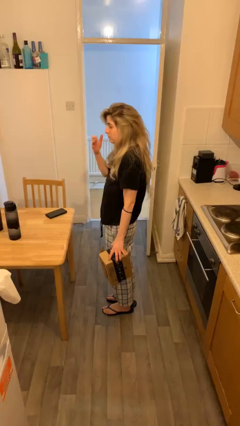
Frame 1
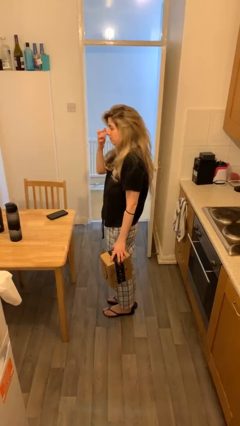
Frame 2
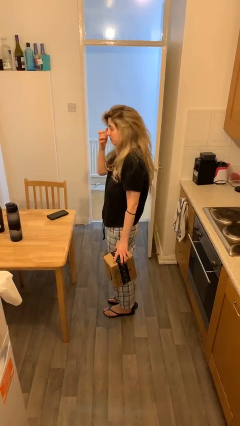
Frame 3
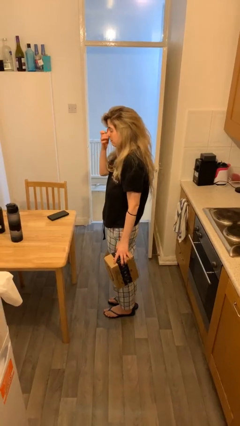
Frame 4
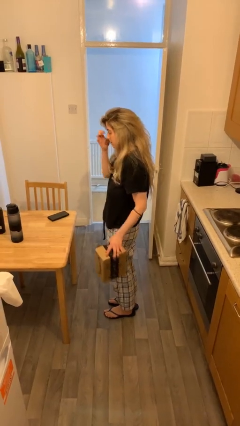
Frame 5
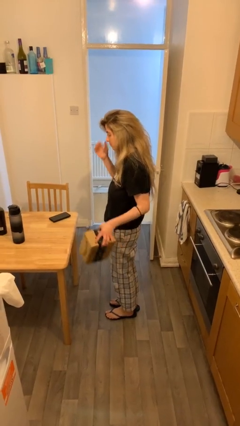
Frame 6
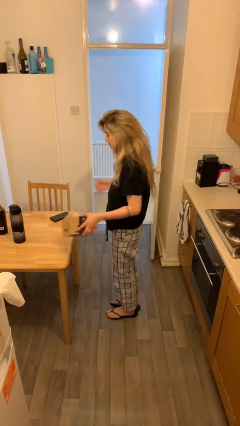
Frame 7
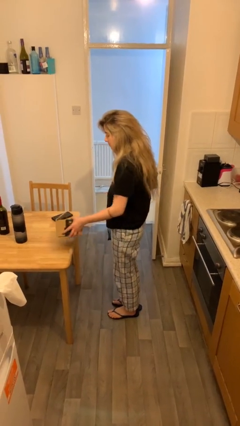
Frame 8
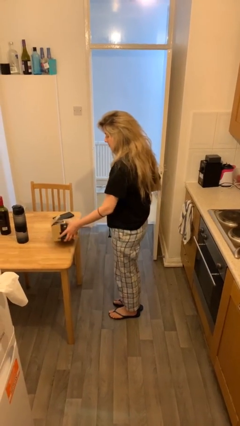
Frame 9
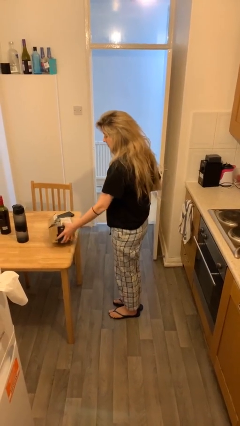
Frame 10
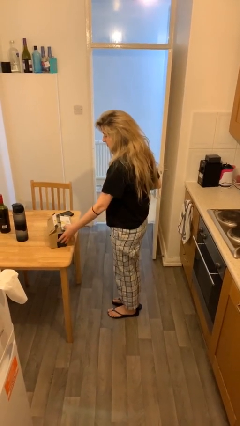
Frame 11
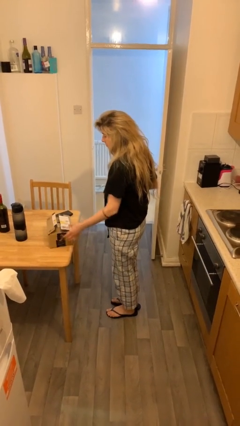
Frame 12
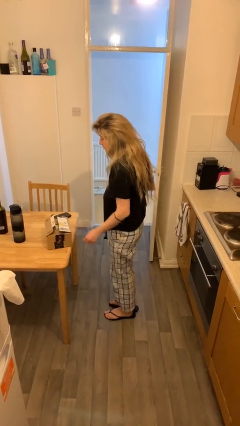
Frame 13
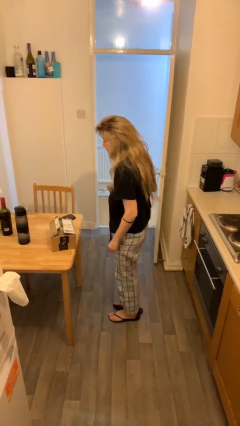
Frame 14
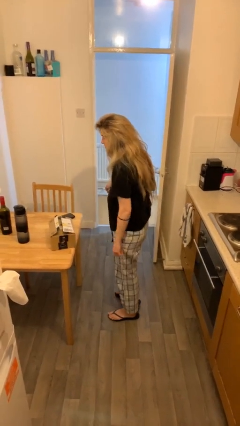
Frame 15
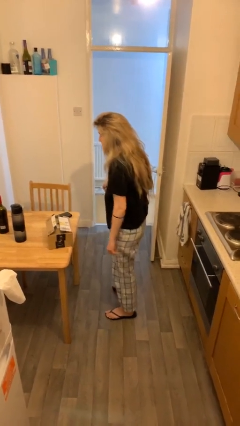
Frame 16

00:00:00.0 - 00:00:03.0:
person puts down object on table

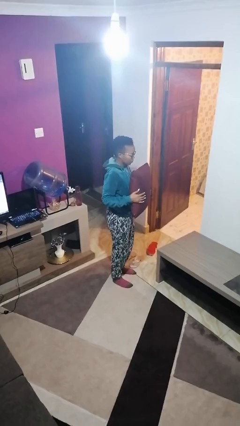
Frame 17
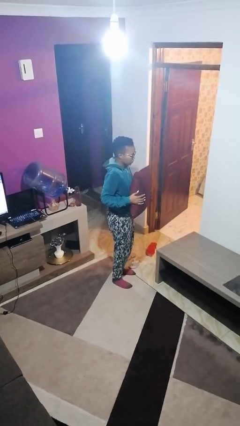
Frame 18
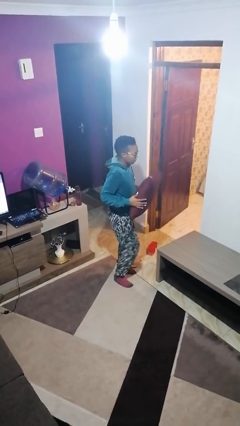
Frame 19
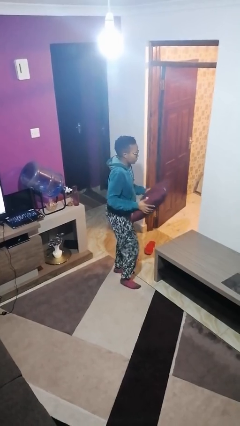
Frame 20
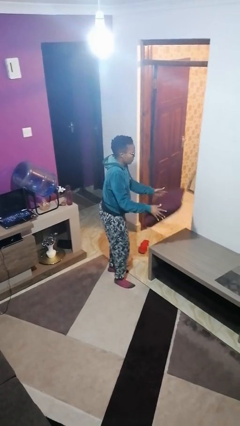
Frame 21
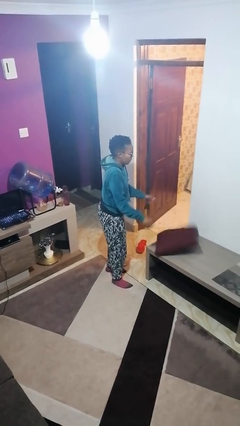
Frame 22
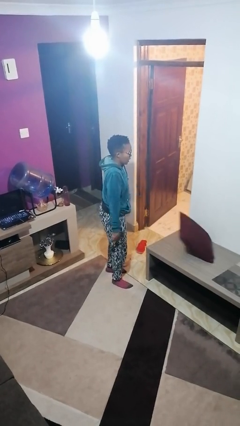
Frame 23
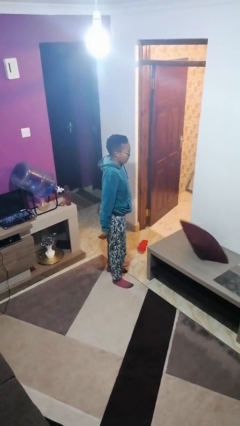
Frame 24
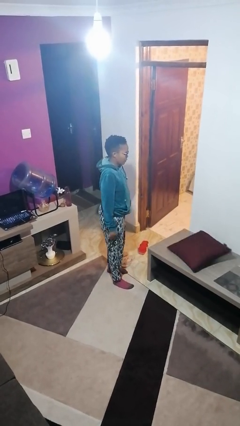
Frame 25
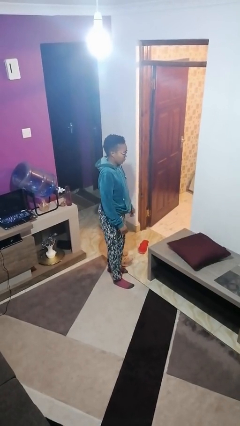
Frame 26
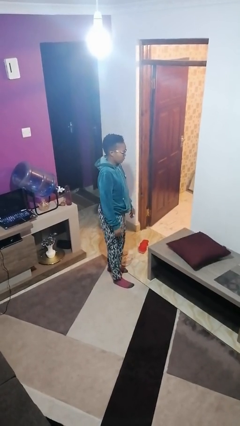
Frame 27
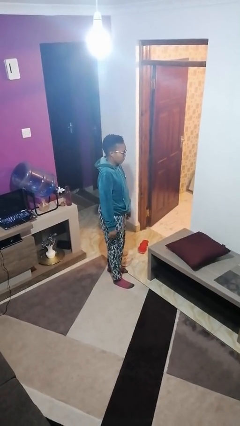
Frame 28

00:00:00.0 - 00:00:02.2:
person throws object on table

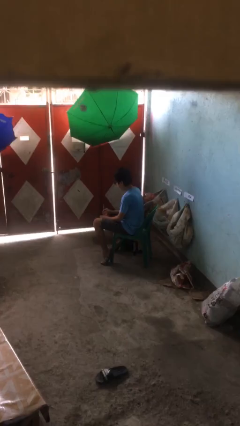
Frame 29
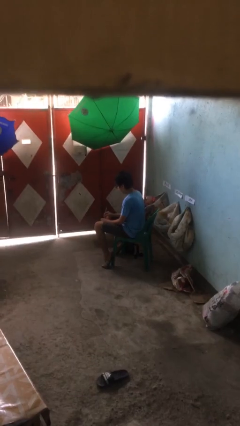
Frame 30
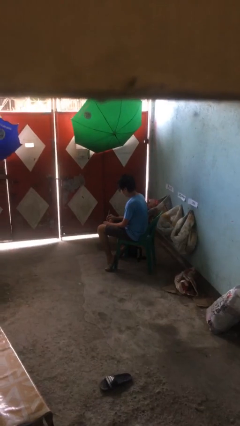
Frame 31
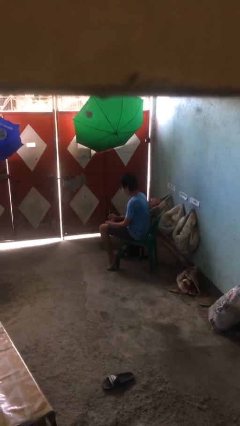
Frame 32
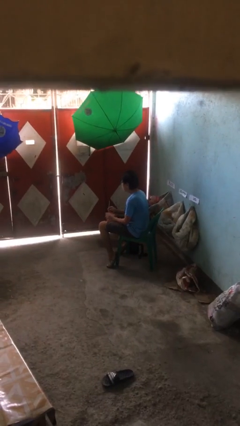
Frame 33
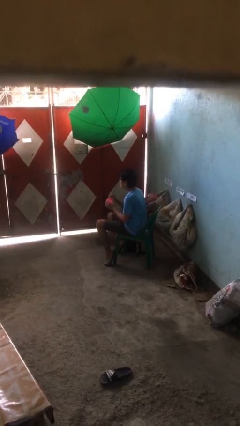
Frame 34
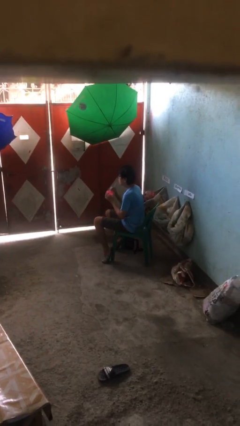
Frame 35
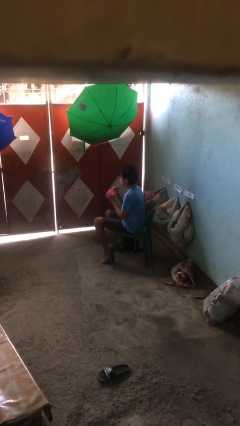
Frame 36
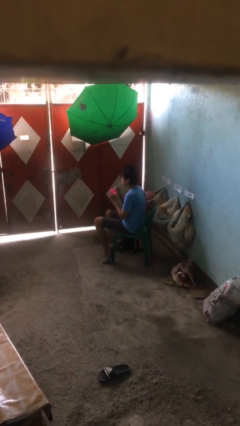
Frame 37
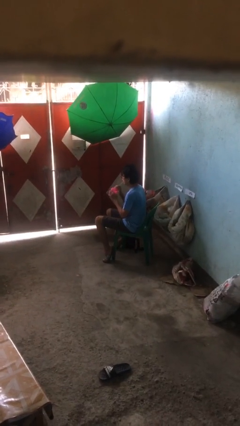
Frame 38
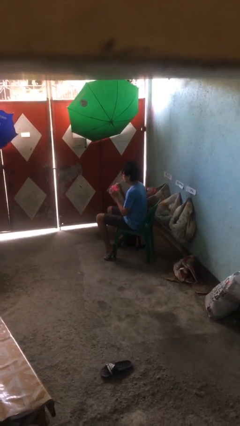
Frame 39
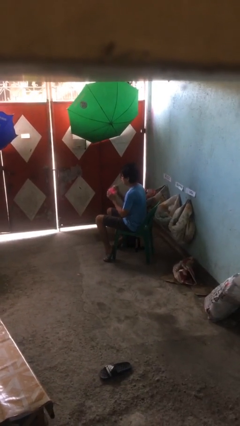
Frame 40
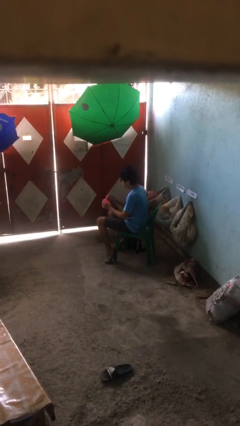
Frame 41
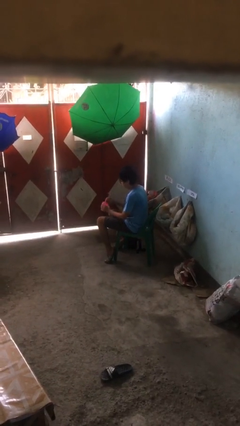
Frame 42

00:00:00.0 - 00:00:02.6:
person drinks from straw

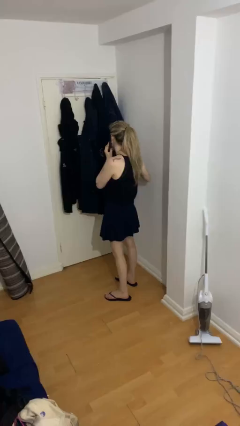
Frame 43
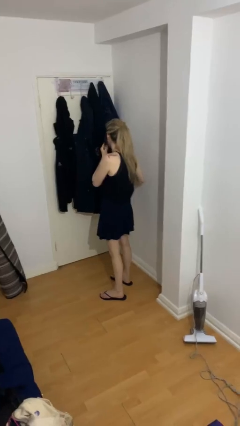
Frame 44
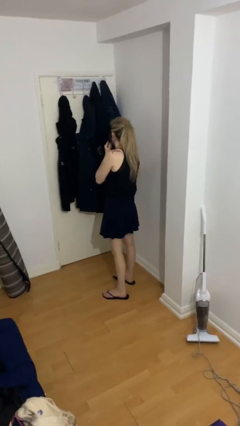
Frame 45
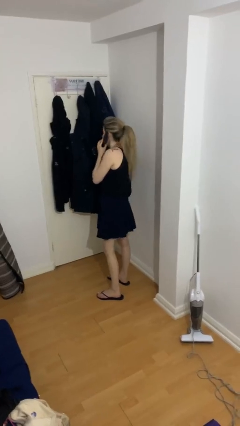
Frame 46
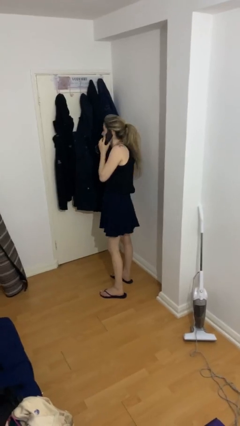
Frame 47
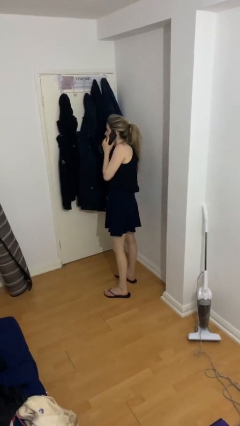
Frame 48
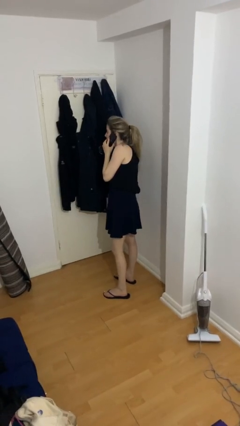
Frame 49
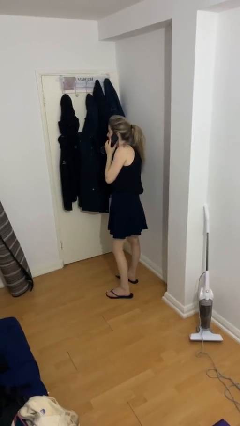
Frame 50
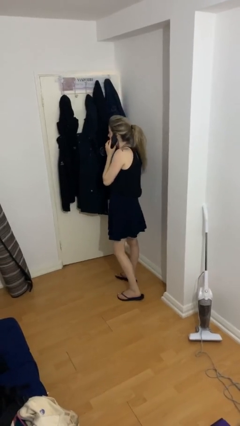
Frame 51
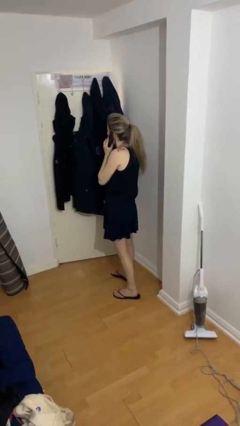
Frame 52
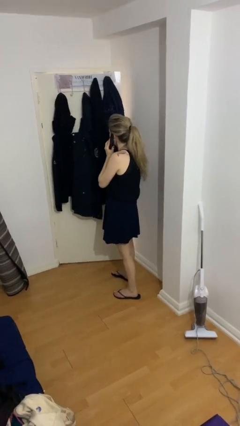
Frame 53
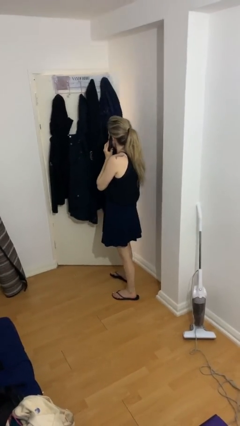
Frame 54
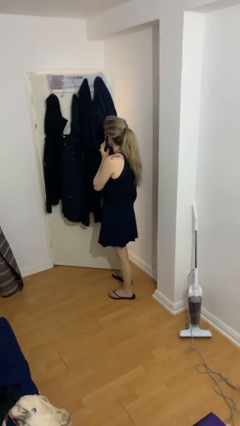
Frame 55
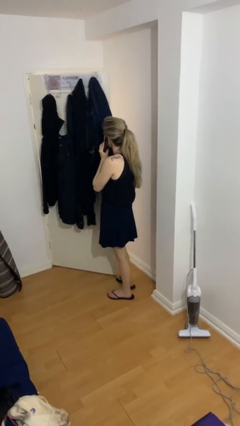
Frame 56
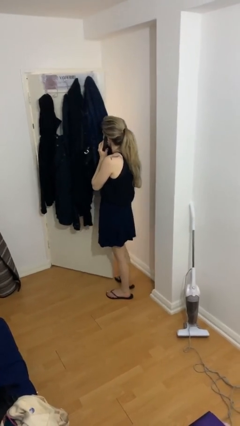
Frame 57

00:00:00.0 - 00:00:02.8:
person opens facility door

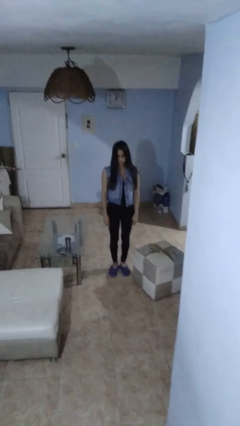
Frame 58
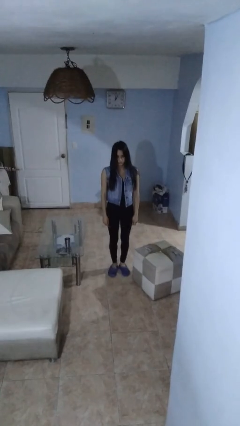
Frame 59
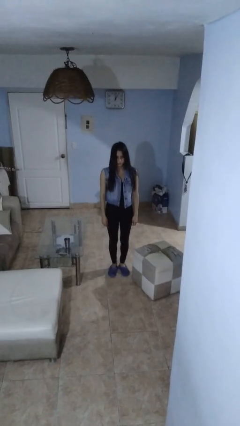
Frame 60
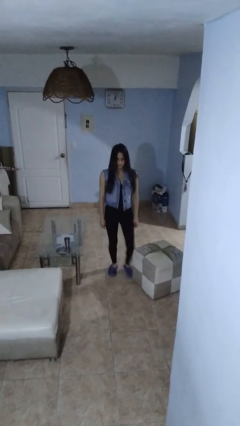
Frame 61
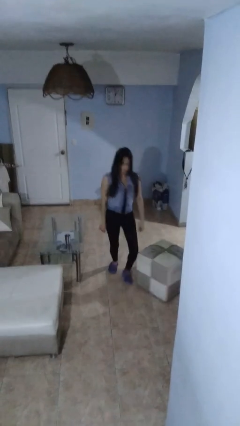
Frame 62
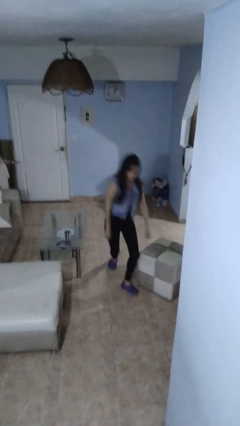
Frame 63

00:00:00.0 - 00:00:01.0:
person trips on object on floor

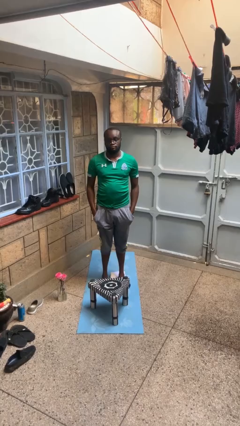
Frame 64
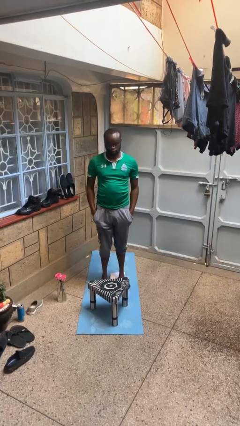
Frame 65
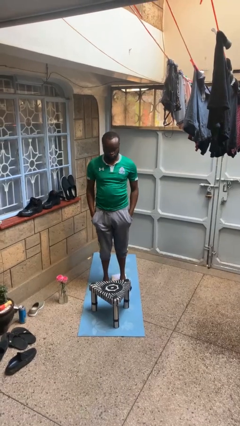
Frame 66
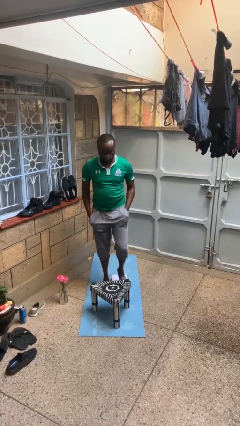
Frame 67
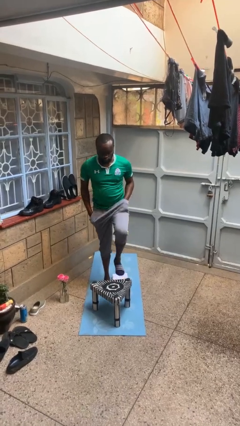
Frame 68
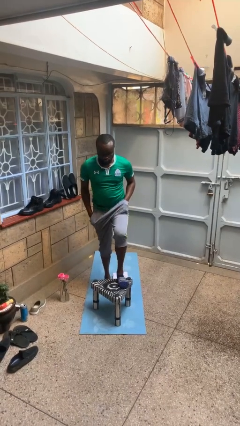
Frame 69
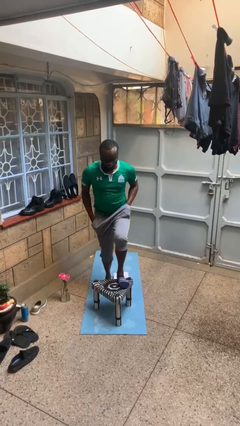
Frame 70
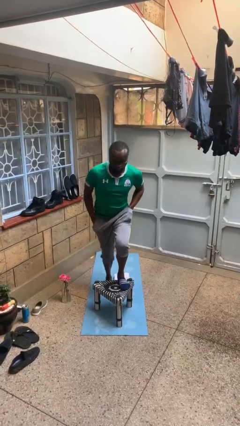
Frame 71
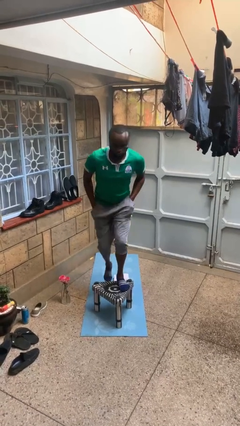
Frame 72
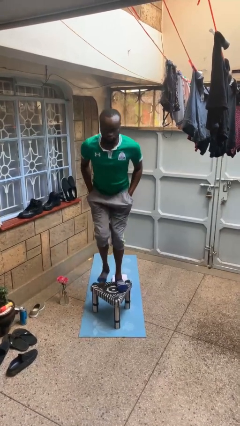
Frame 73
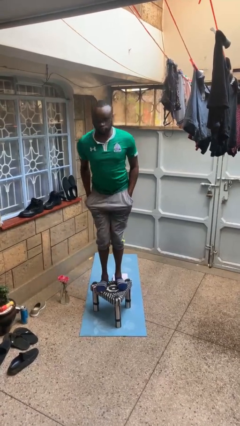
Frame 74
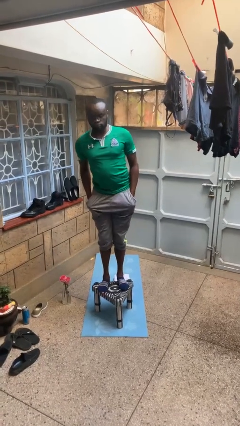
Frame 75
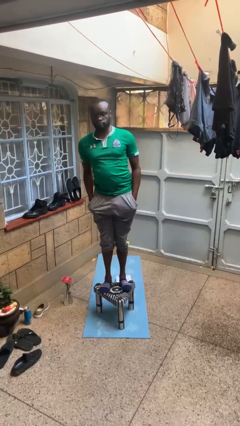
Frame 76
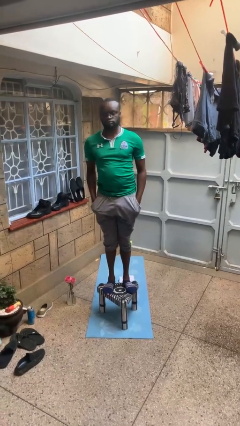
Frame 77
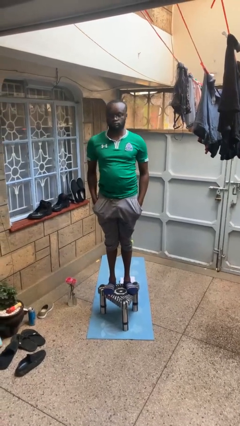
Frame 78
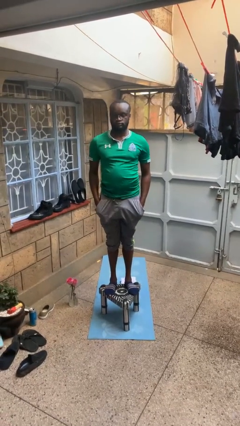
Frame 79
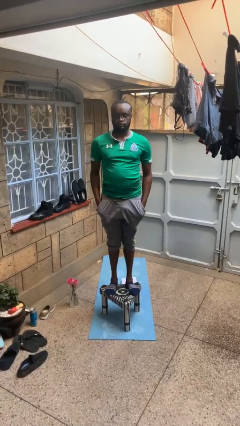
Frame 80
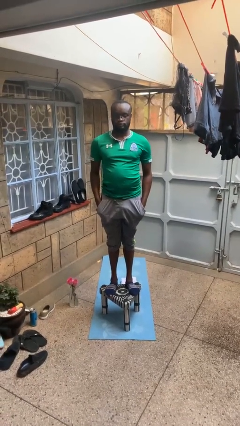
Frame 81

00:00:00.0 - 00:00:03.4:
person climbs on table

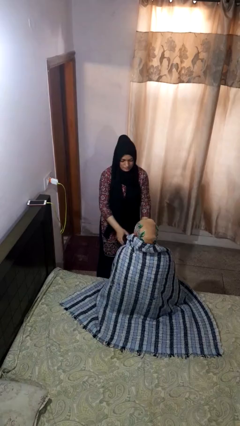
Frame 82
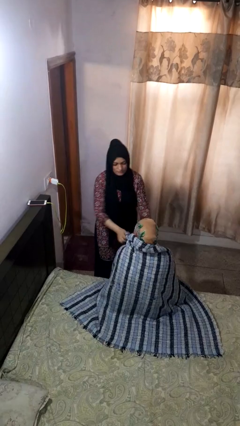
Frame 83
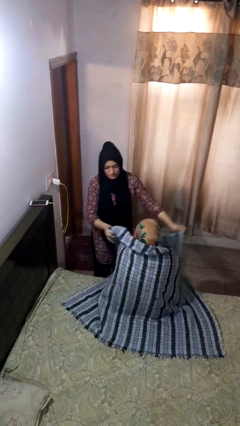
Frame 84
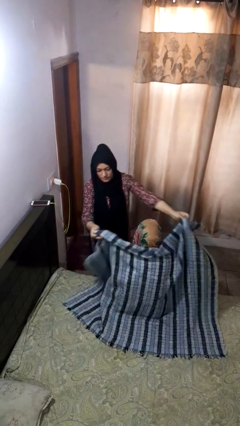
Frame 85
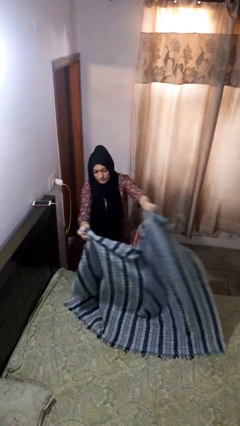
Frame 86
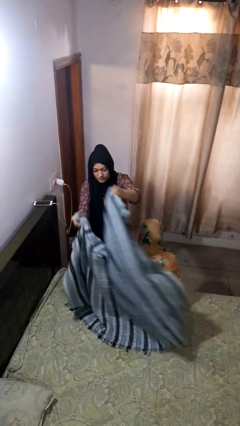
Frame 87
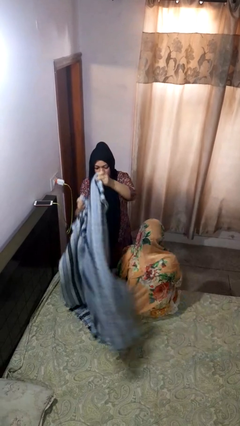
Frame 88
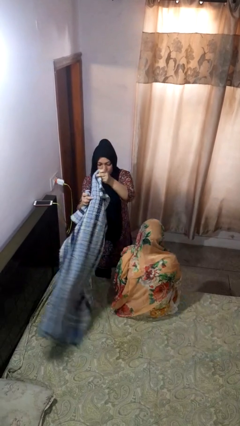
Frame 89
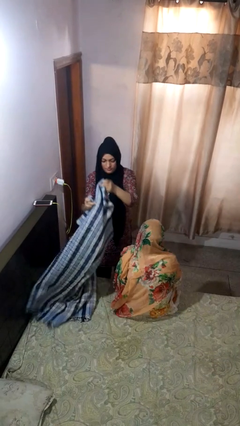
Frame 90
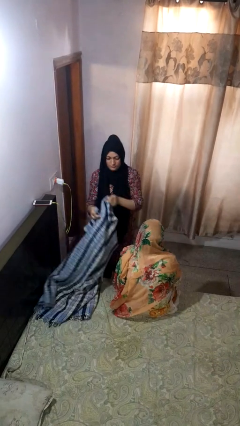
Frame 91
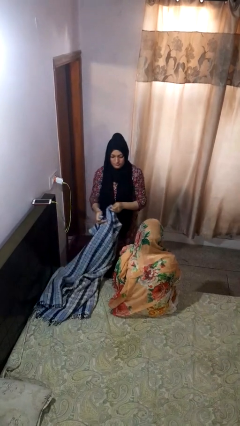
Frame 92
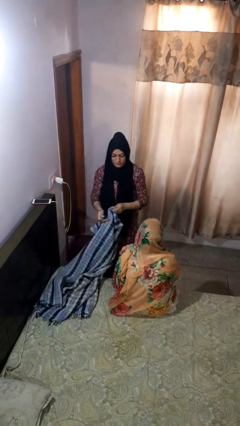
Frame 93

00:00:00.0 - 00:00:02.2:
person uncovers friend with blanket
